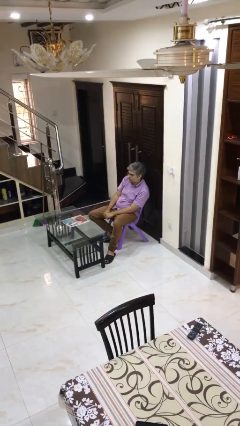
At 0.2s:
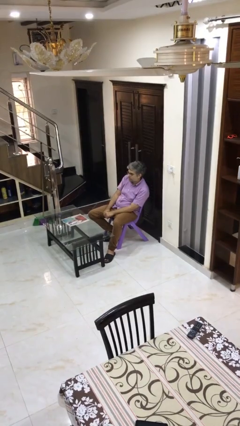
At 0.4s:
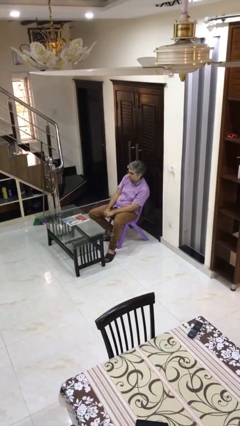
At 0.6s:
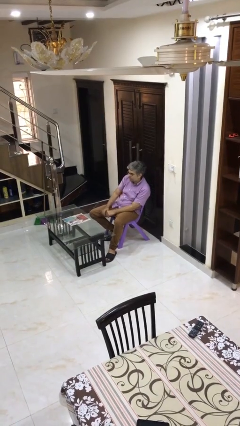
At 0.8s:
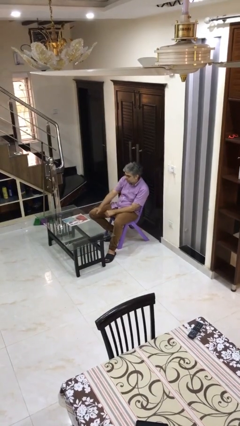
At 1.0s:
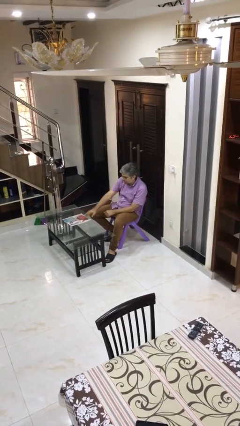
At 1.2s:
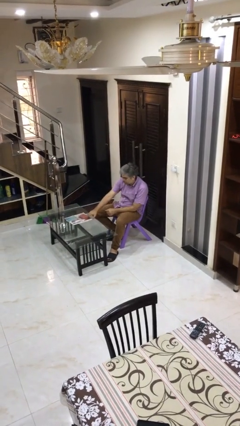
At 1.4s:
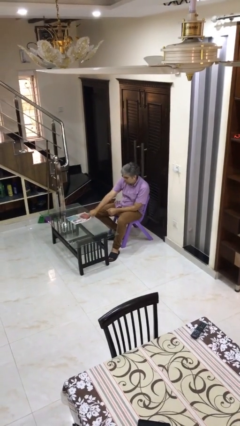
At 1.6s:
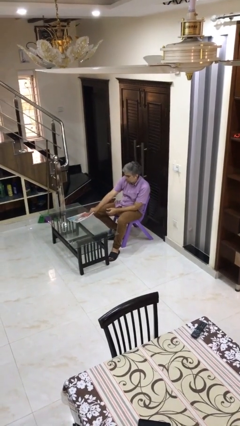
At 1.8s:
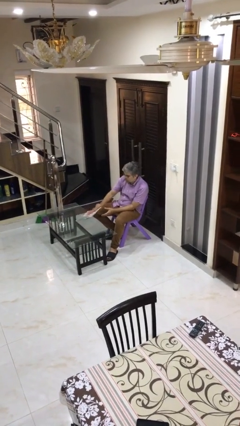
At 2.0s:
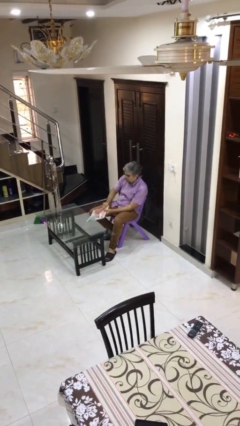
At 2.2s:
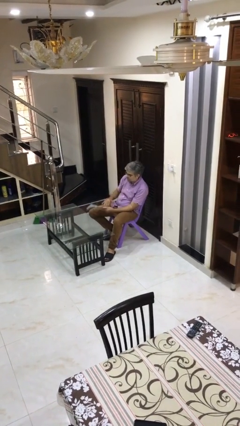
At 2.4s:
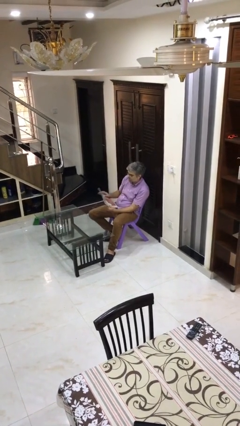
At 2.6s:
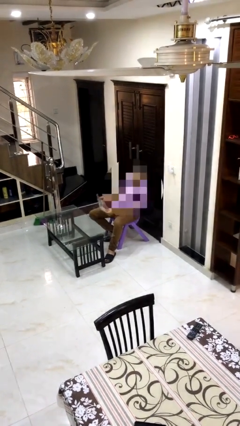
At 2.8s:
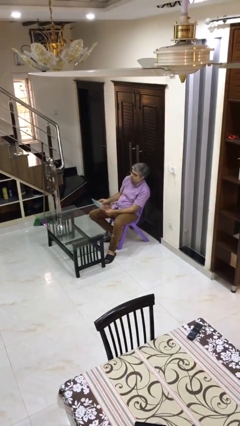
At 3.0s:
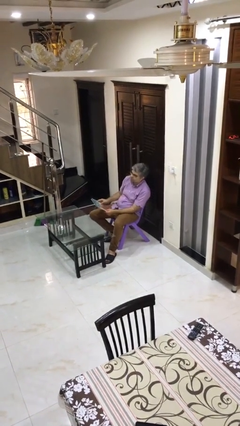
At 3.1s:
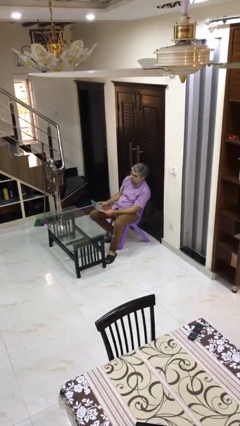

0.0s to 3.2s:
person picks up object from table

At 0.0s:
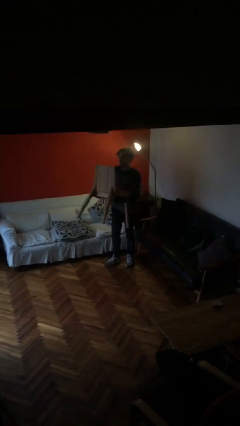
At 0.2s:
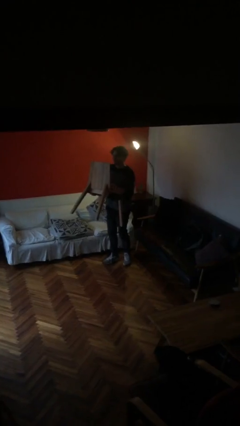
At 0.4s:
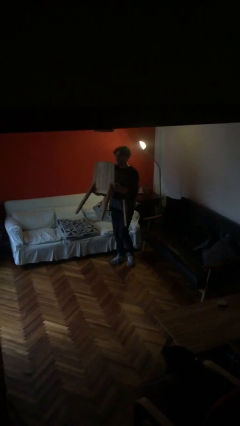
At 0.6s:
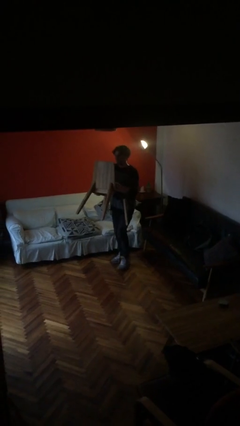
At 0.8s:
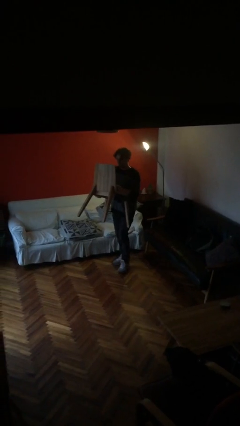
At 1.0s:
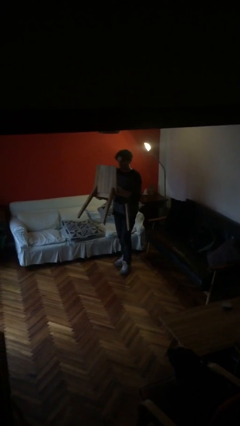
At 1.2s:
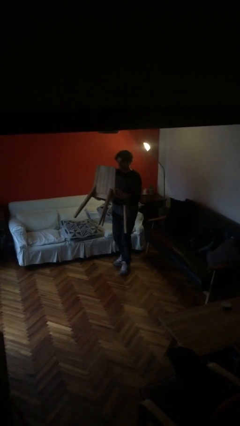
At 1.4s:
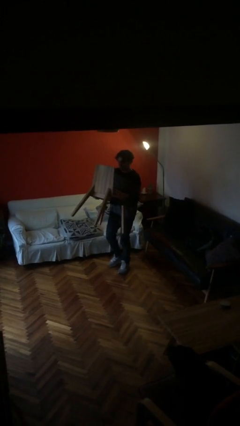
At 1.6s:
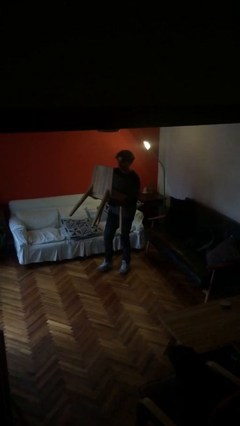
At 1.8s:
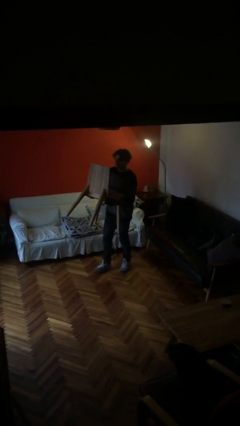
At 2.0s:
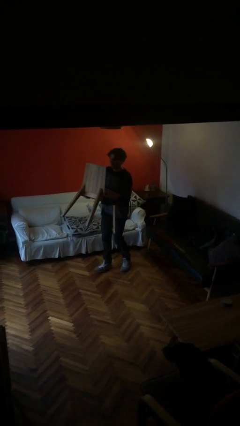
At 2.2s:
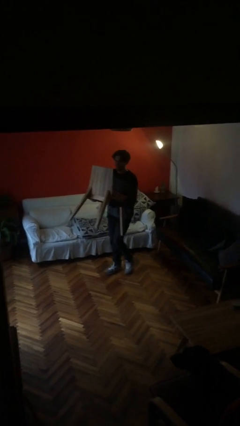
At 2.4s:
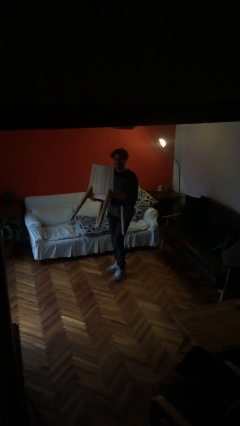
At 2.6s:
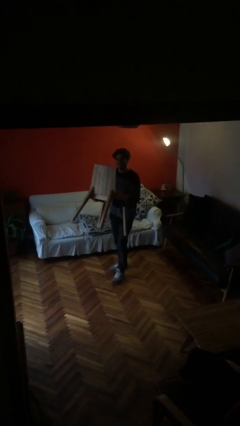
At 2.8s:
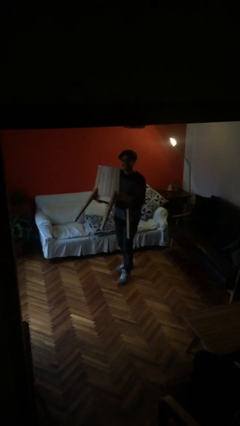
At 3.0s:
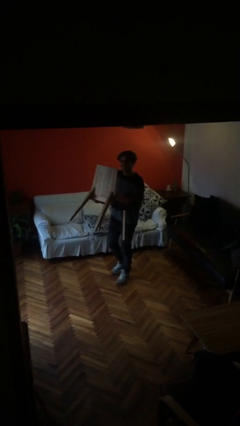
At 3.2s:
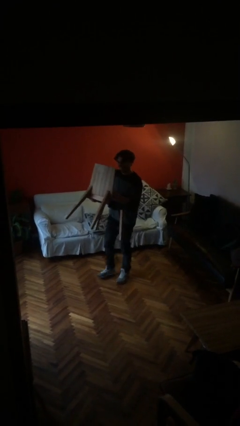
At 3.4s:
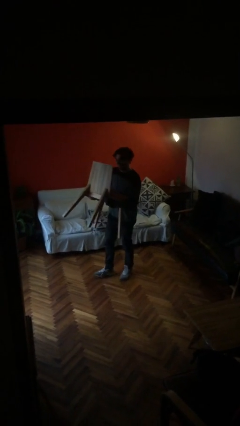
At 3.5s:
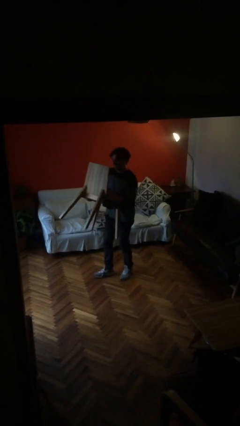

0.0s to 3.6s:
person carries heavy object

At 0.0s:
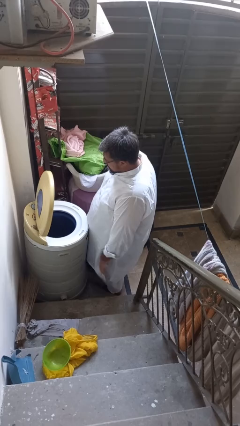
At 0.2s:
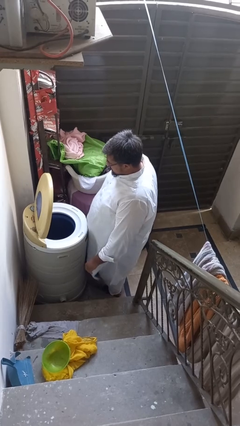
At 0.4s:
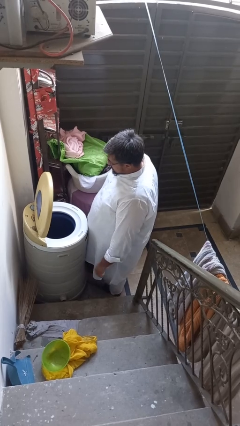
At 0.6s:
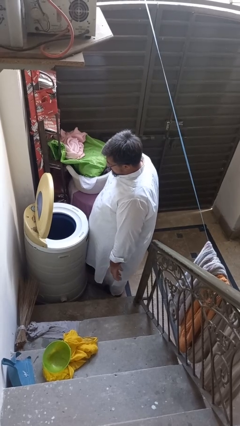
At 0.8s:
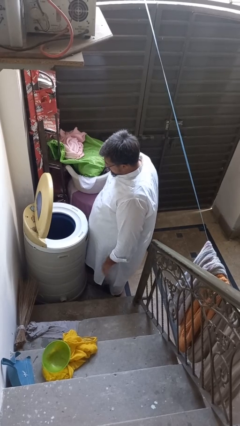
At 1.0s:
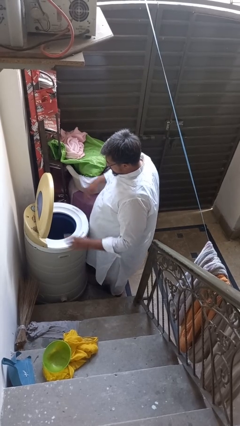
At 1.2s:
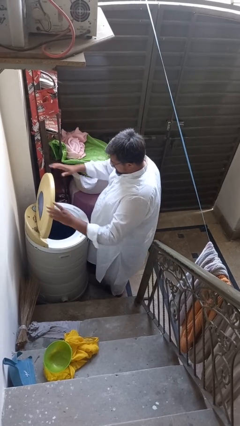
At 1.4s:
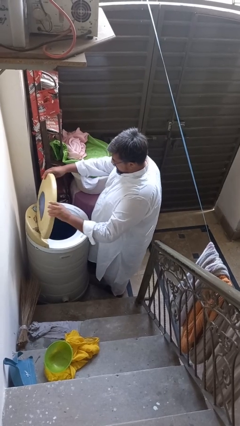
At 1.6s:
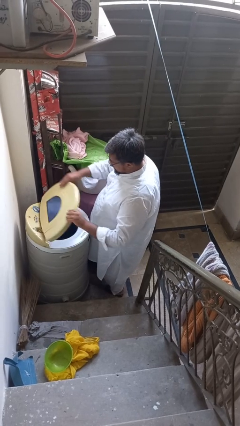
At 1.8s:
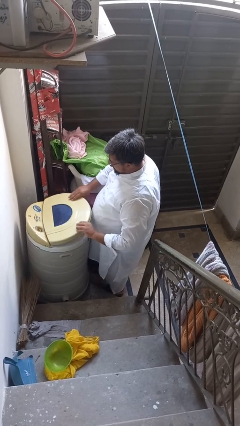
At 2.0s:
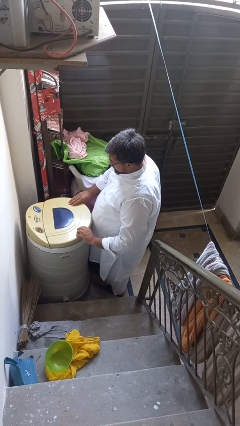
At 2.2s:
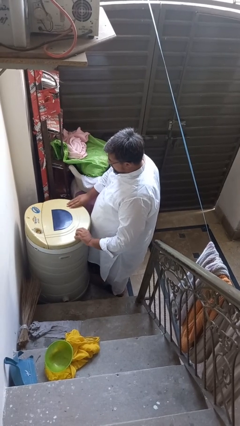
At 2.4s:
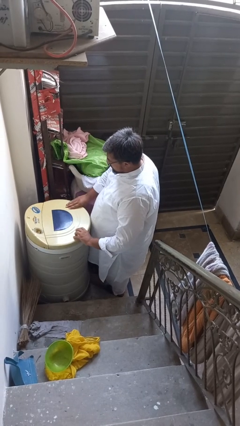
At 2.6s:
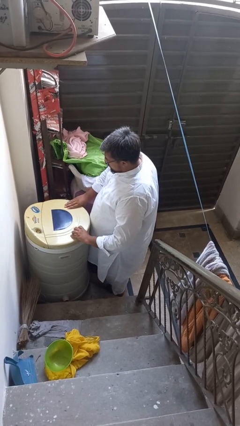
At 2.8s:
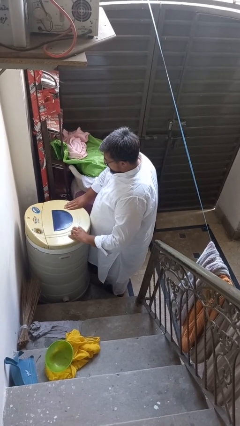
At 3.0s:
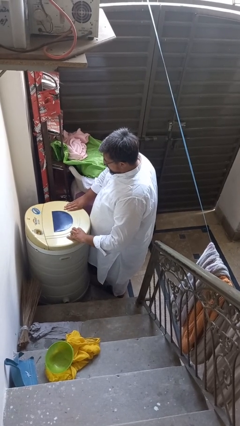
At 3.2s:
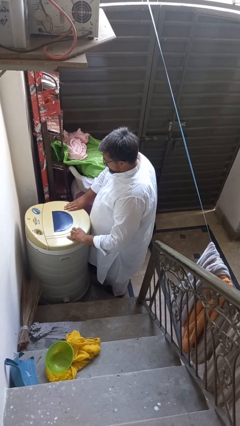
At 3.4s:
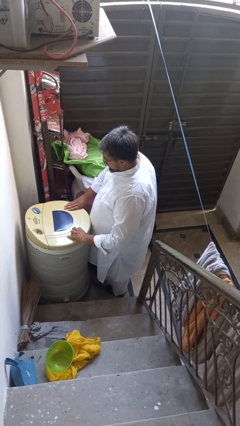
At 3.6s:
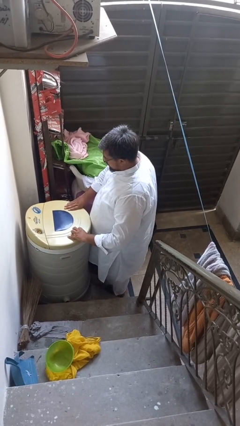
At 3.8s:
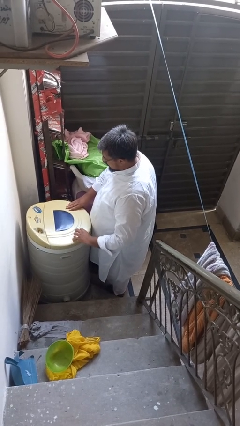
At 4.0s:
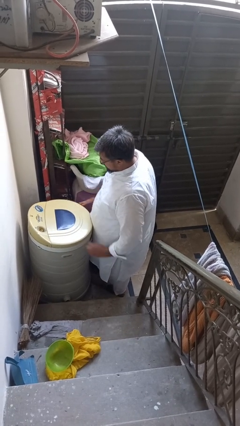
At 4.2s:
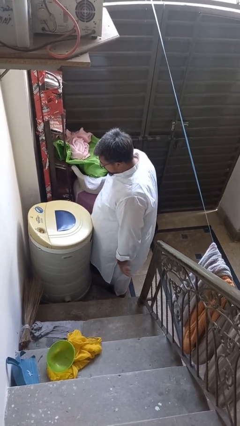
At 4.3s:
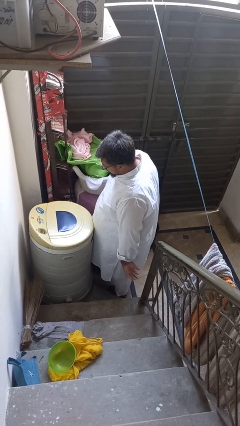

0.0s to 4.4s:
person closes clothes washer

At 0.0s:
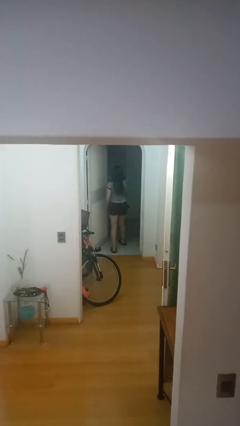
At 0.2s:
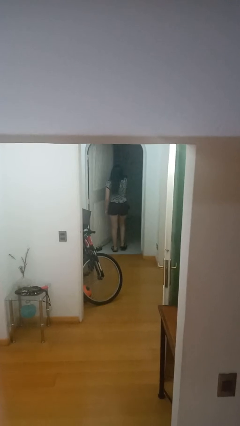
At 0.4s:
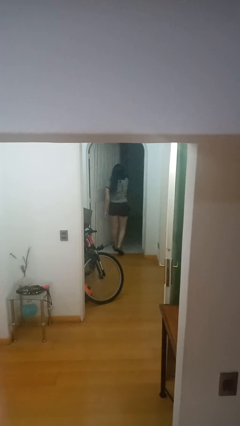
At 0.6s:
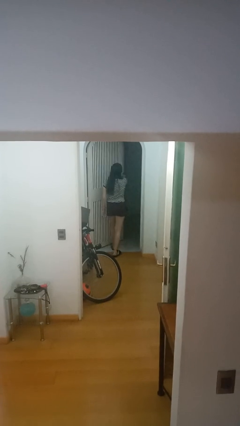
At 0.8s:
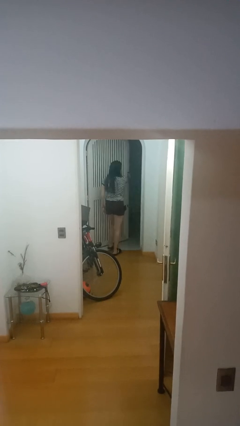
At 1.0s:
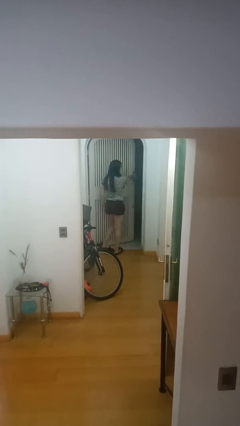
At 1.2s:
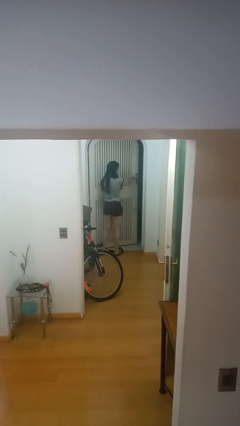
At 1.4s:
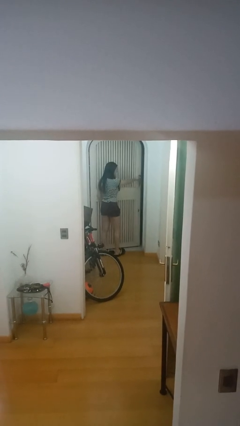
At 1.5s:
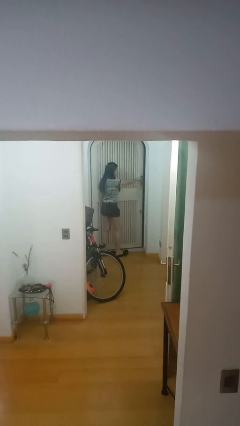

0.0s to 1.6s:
person closes facility door

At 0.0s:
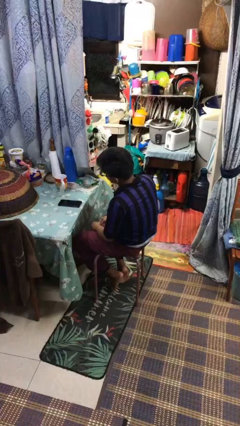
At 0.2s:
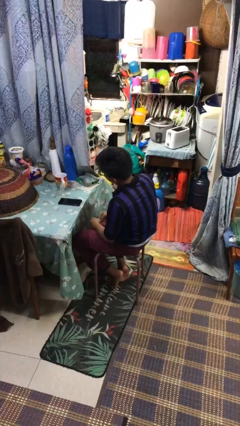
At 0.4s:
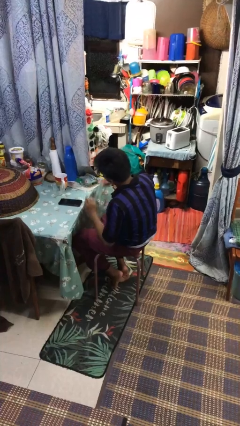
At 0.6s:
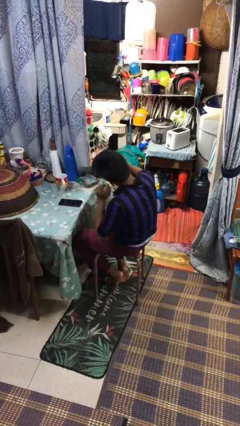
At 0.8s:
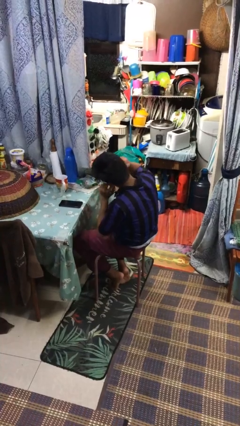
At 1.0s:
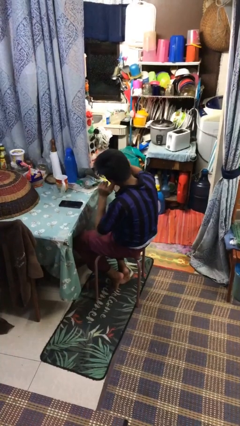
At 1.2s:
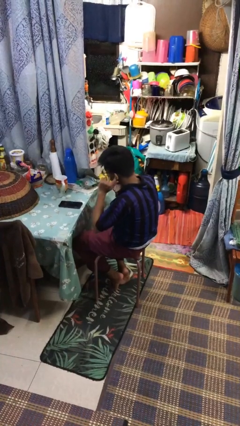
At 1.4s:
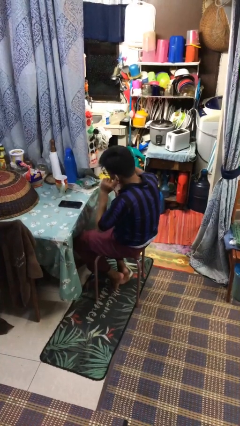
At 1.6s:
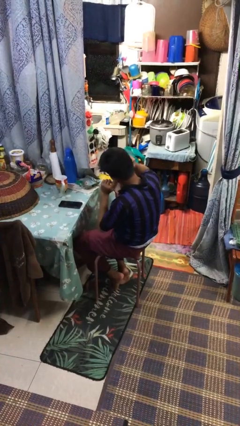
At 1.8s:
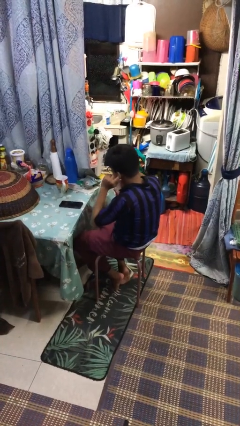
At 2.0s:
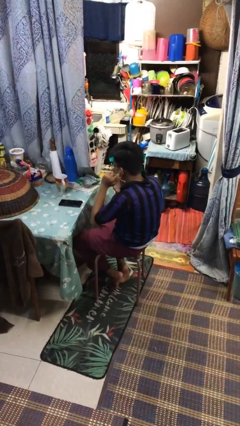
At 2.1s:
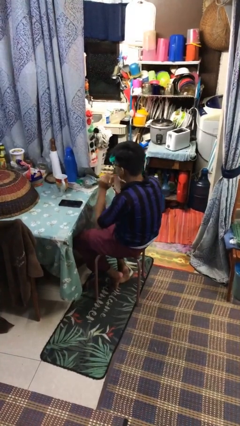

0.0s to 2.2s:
person puts fingers in ear

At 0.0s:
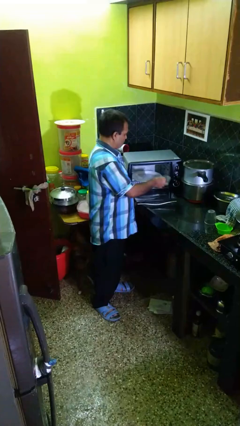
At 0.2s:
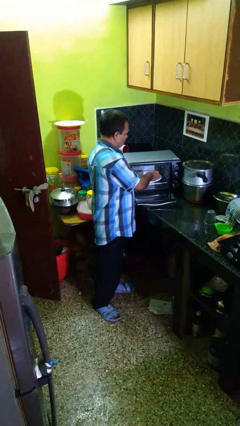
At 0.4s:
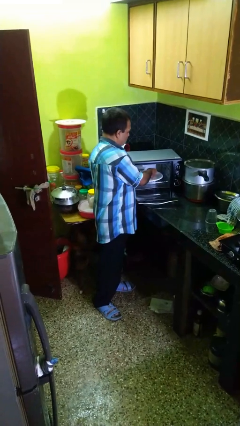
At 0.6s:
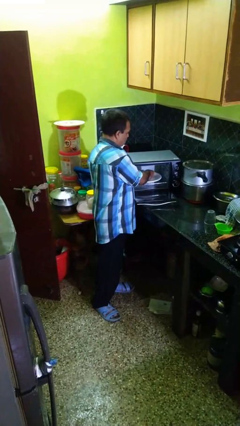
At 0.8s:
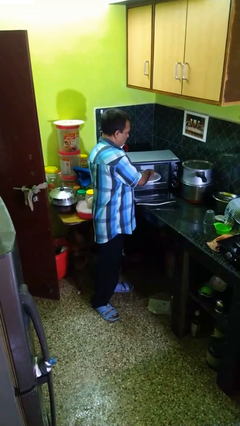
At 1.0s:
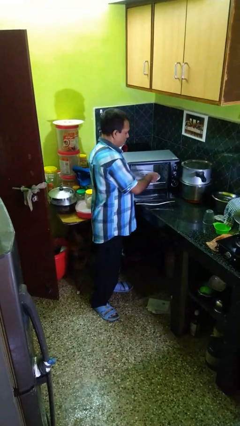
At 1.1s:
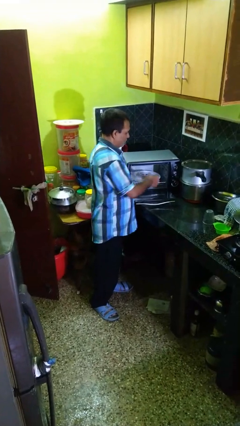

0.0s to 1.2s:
person puts object into microwave

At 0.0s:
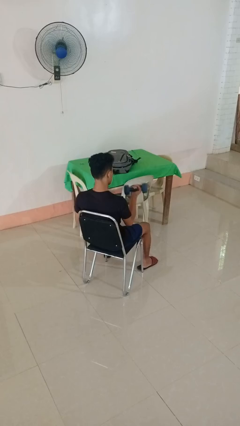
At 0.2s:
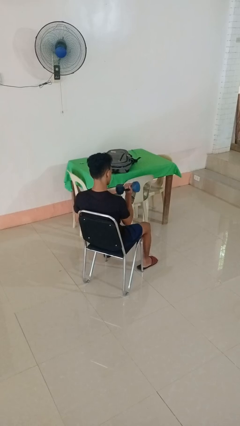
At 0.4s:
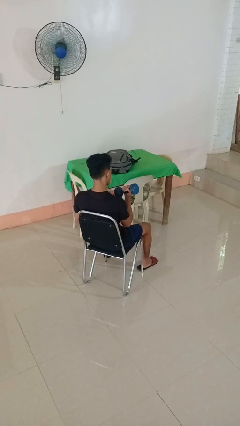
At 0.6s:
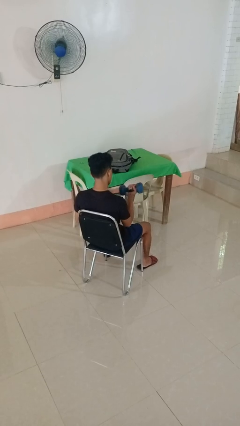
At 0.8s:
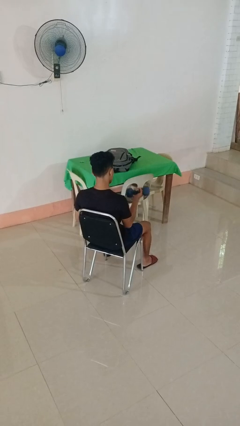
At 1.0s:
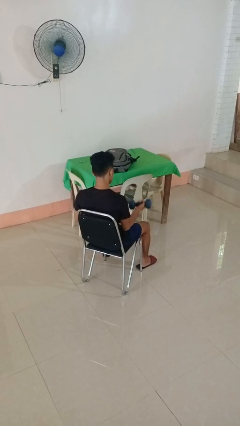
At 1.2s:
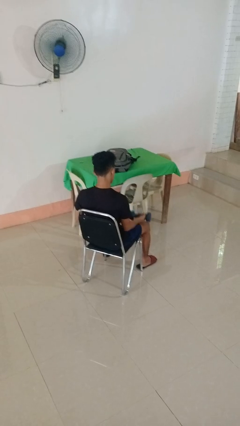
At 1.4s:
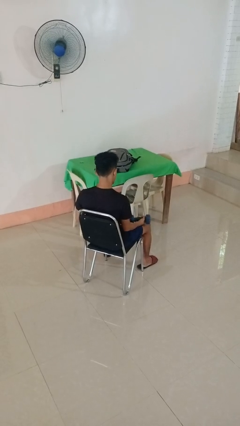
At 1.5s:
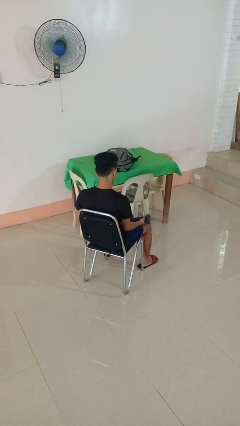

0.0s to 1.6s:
person lifts dumbbells
